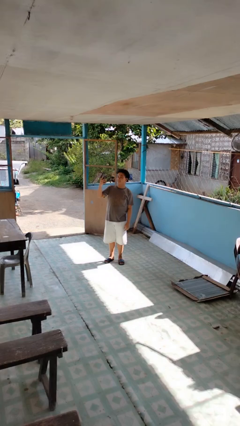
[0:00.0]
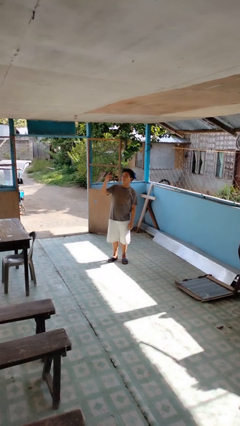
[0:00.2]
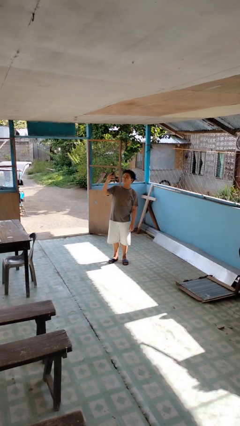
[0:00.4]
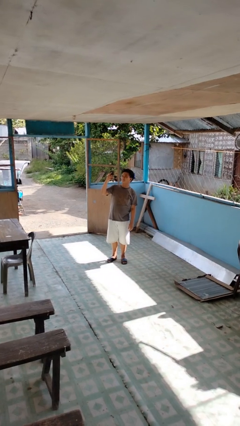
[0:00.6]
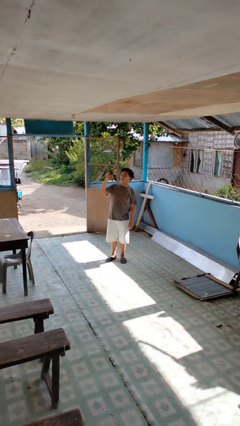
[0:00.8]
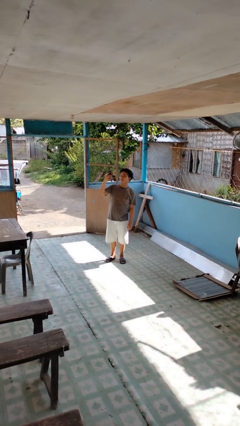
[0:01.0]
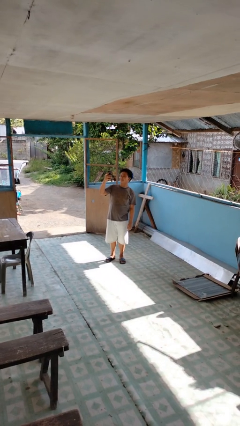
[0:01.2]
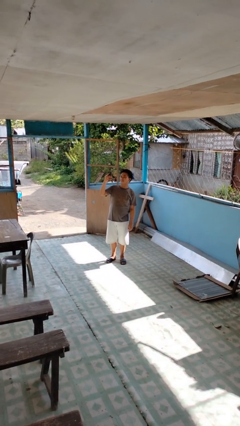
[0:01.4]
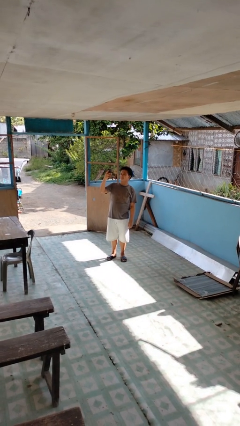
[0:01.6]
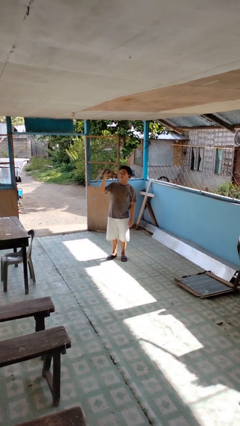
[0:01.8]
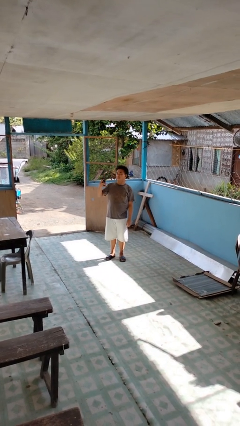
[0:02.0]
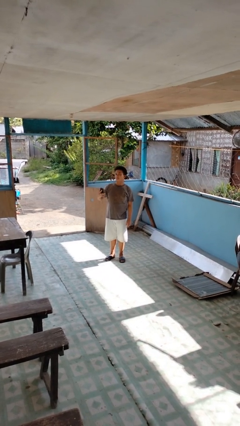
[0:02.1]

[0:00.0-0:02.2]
person takes selfie

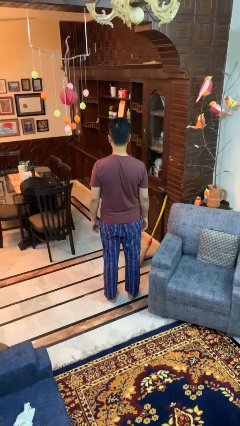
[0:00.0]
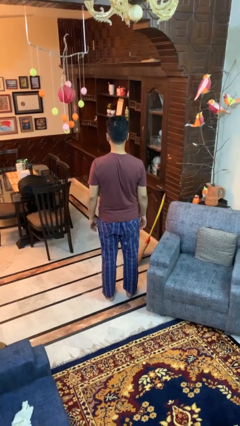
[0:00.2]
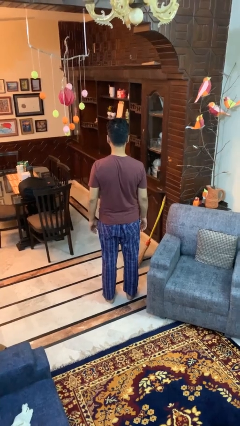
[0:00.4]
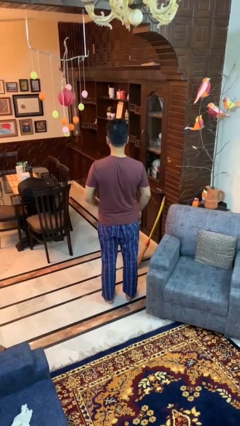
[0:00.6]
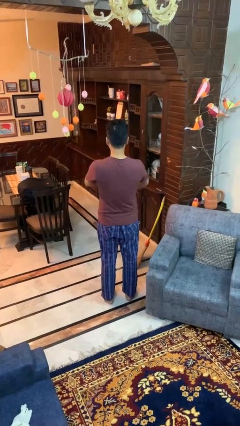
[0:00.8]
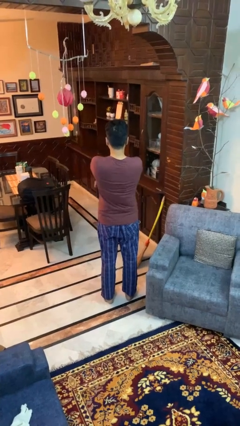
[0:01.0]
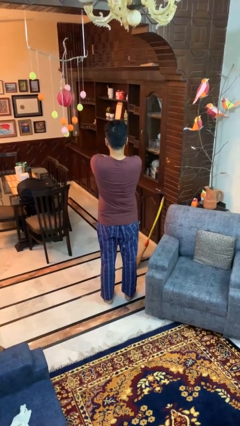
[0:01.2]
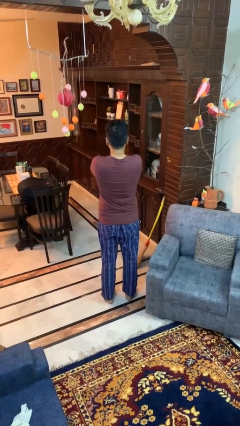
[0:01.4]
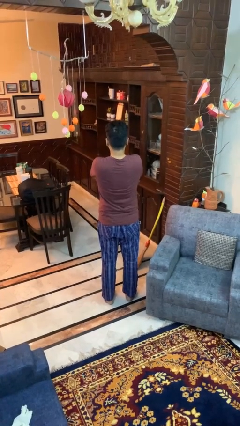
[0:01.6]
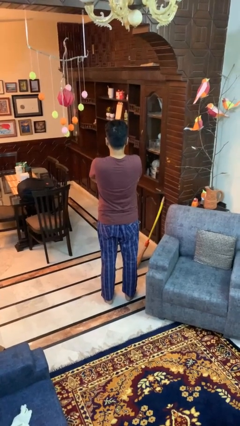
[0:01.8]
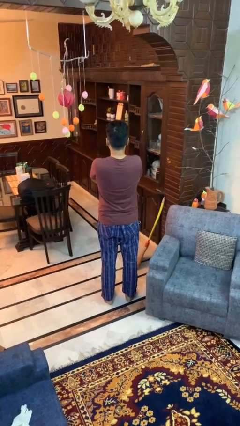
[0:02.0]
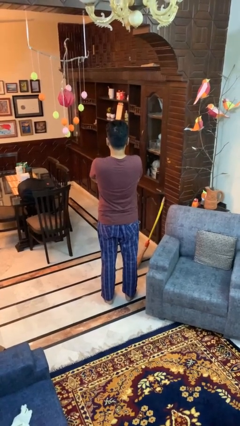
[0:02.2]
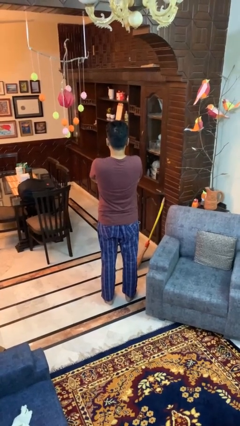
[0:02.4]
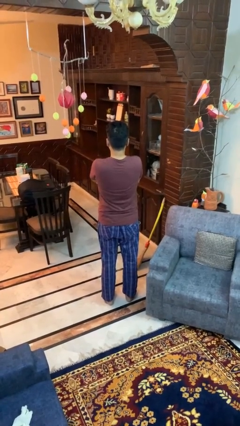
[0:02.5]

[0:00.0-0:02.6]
person crosses arms

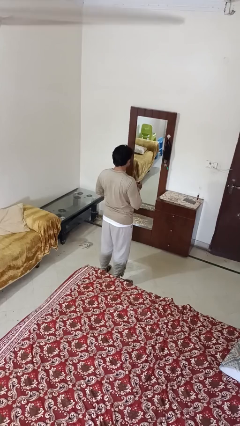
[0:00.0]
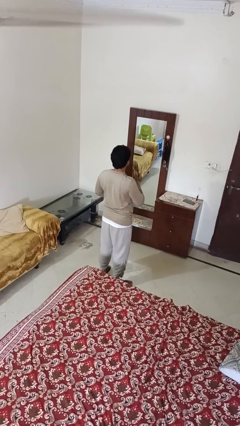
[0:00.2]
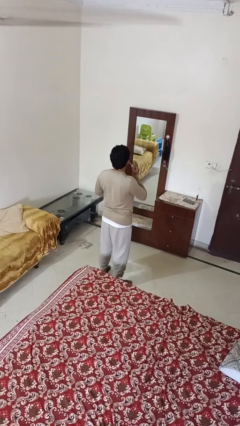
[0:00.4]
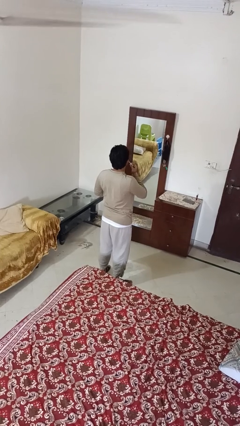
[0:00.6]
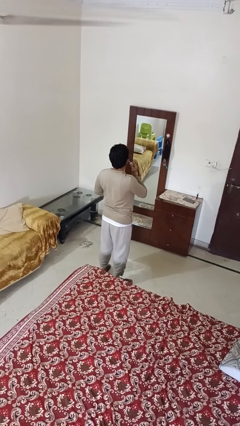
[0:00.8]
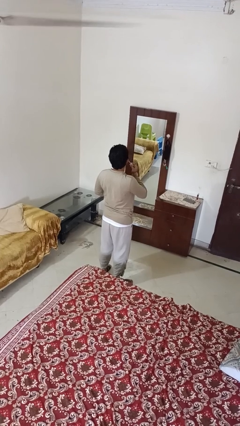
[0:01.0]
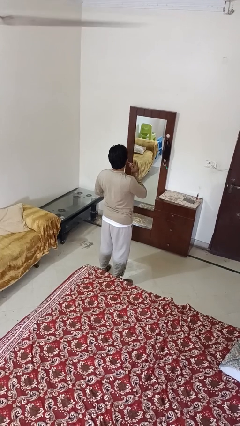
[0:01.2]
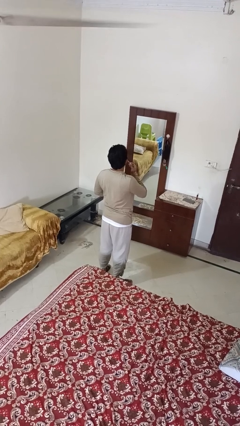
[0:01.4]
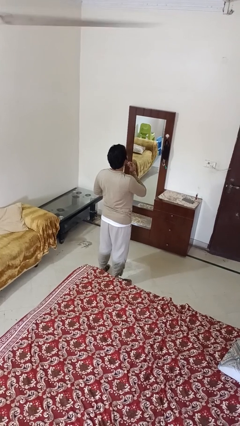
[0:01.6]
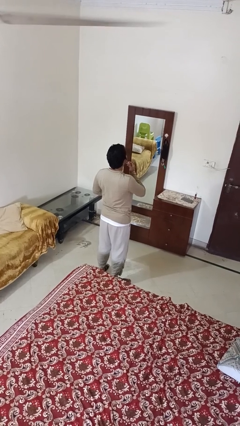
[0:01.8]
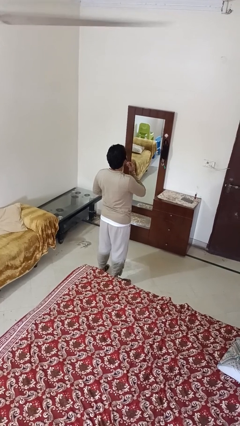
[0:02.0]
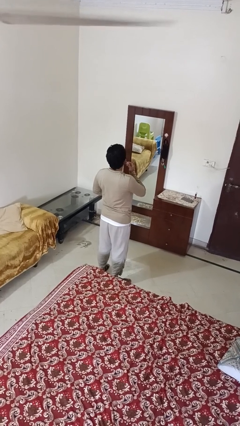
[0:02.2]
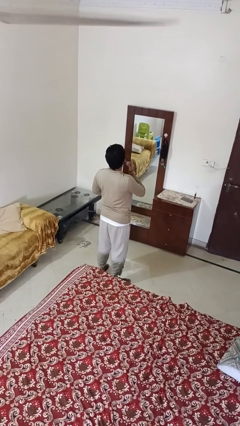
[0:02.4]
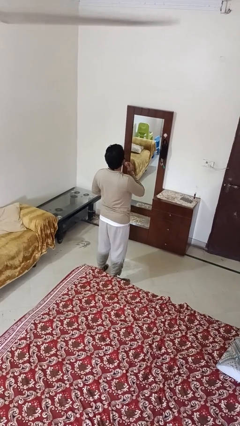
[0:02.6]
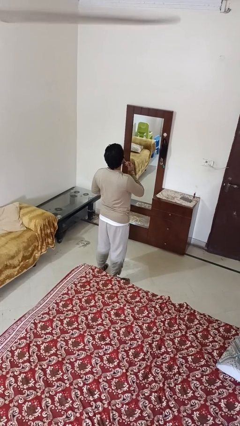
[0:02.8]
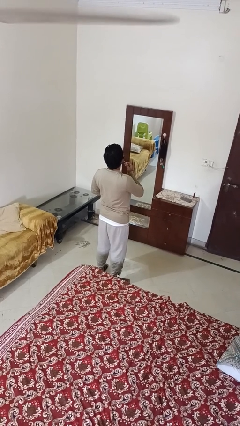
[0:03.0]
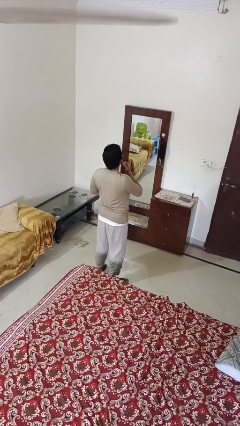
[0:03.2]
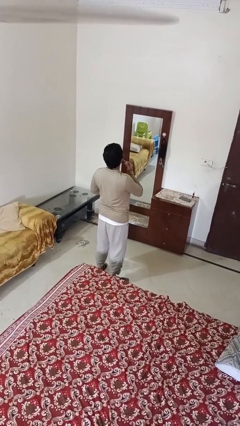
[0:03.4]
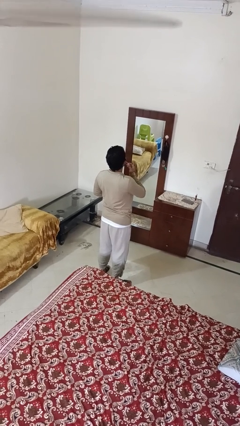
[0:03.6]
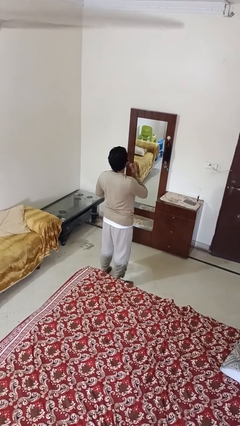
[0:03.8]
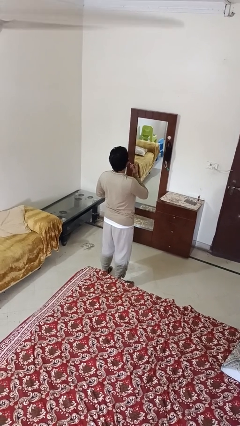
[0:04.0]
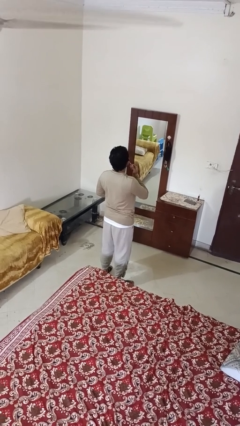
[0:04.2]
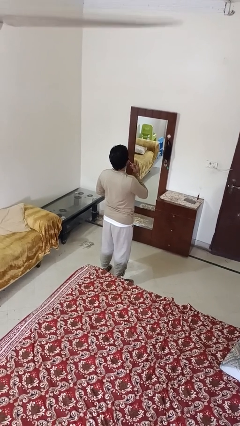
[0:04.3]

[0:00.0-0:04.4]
person applies lip makeup

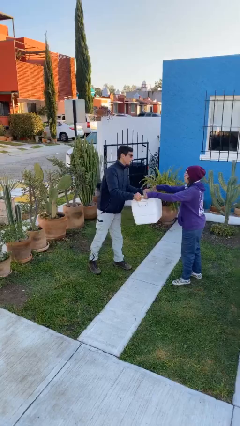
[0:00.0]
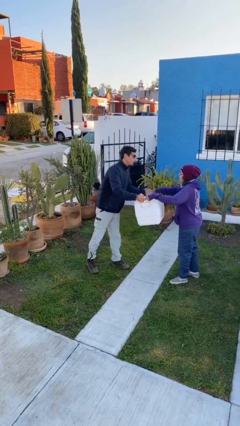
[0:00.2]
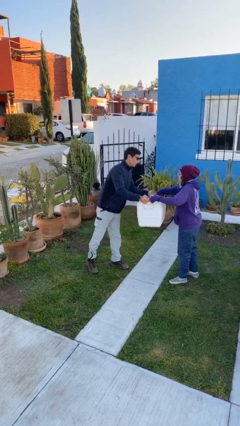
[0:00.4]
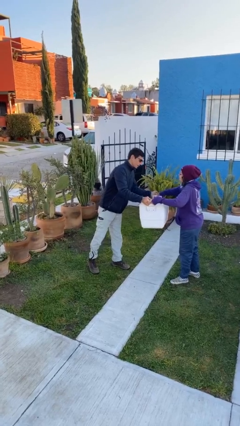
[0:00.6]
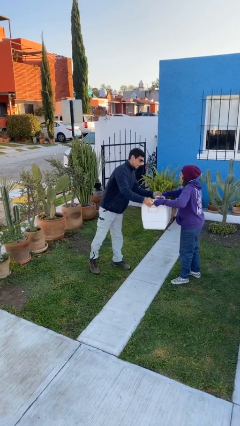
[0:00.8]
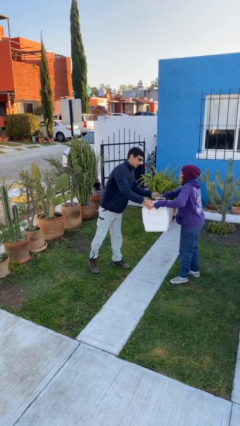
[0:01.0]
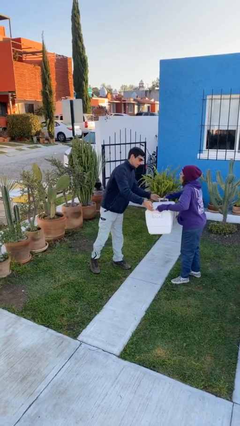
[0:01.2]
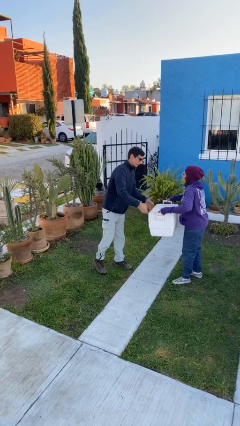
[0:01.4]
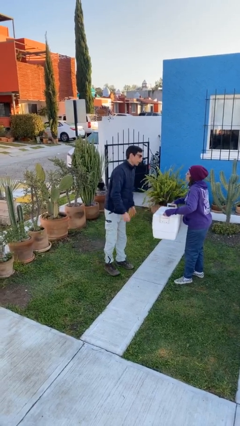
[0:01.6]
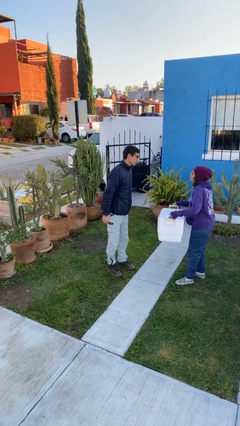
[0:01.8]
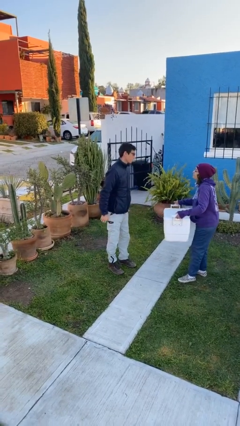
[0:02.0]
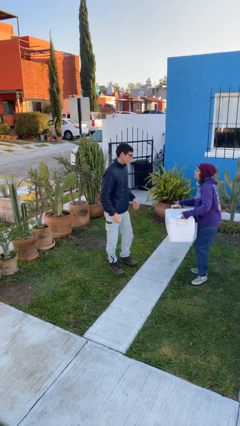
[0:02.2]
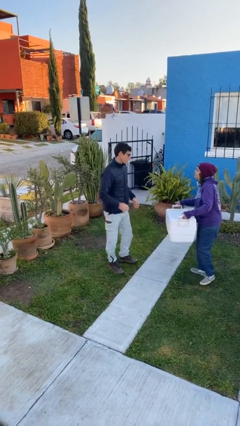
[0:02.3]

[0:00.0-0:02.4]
person transfers object to person

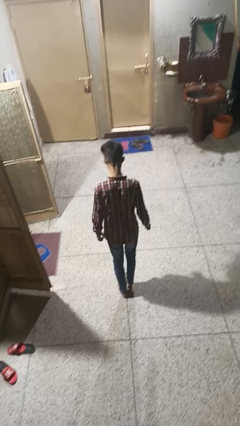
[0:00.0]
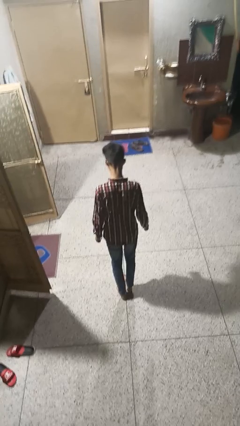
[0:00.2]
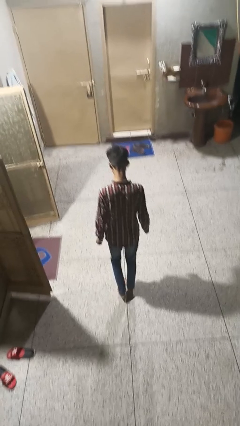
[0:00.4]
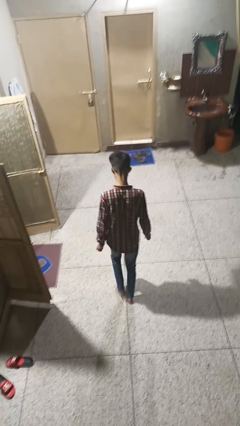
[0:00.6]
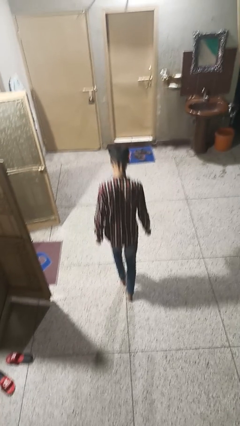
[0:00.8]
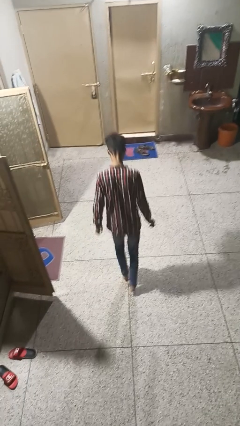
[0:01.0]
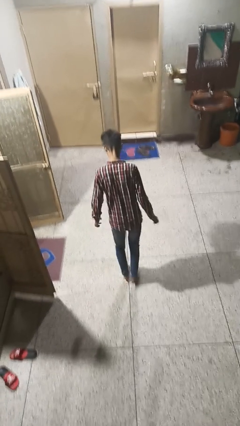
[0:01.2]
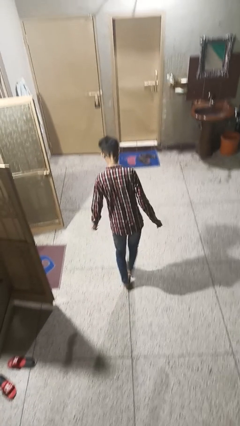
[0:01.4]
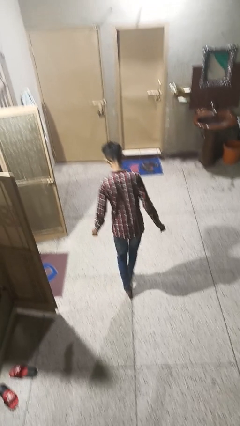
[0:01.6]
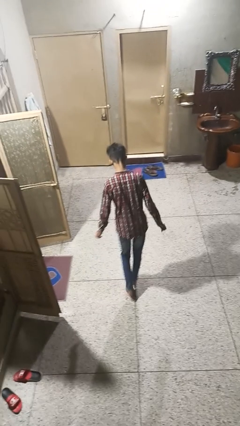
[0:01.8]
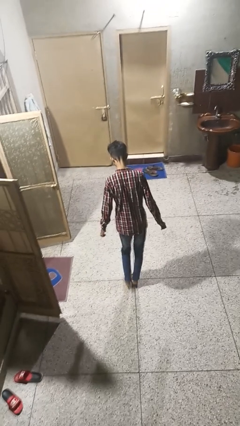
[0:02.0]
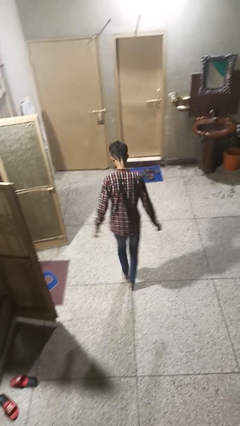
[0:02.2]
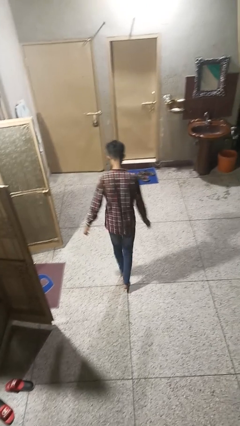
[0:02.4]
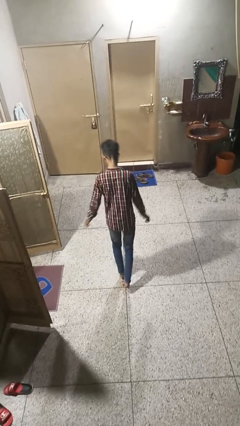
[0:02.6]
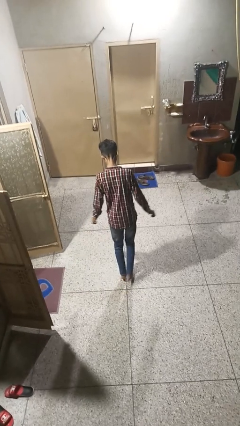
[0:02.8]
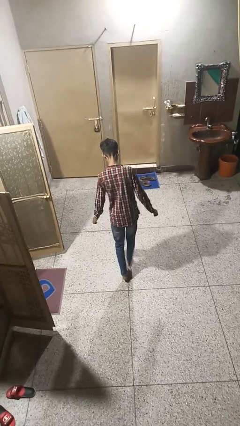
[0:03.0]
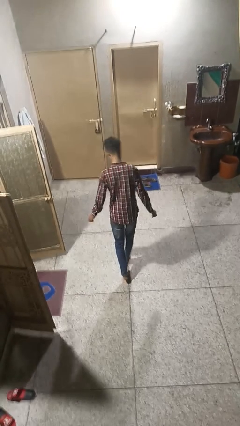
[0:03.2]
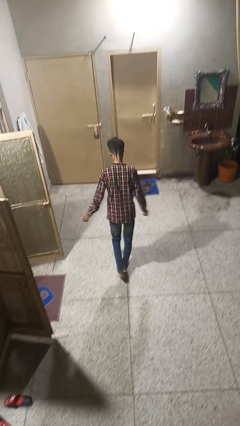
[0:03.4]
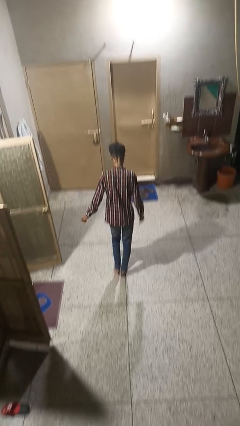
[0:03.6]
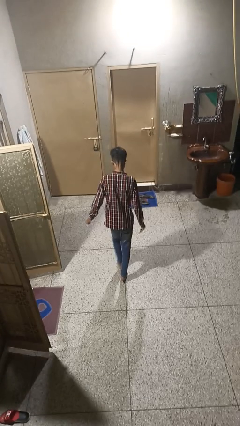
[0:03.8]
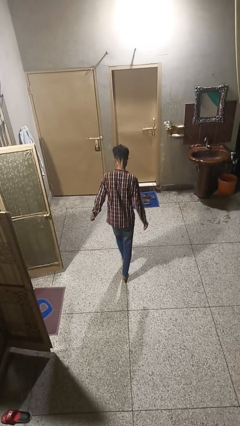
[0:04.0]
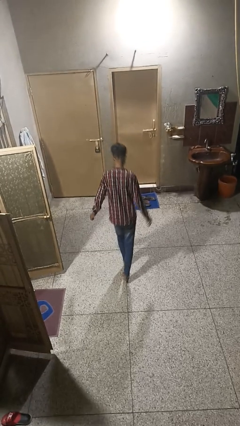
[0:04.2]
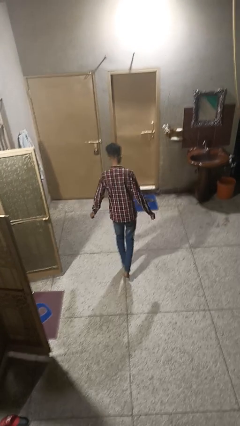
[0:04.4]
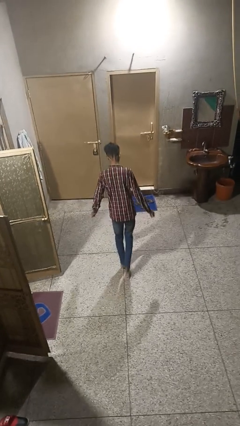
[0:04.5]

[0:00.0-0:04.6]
person walks tiptoe

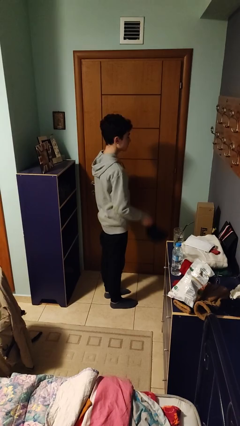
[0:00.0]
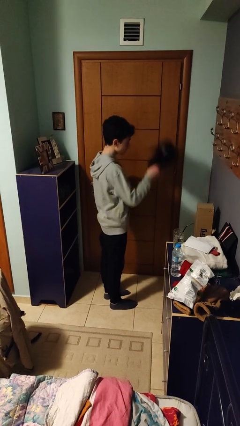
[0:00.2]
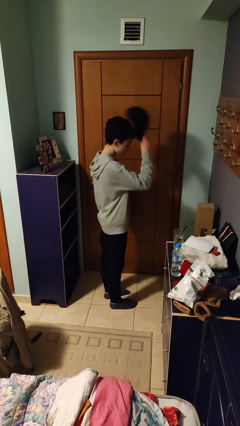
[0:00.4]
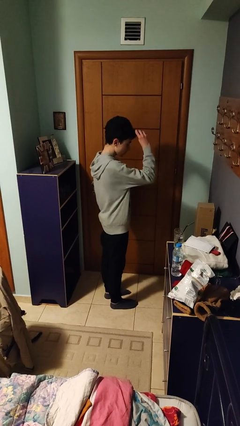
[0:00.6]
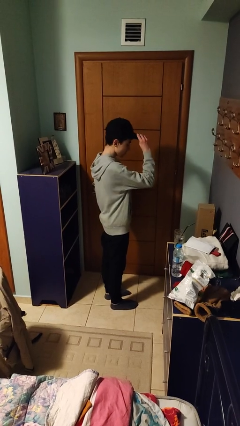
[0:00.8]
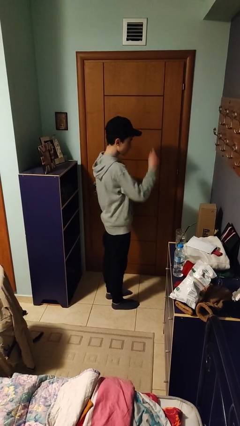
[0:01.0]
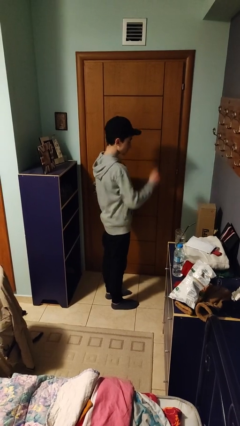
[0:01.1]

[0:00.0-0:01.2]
person puts on hat
